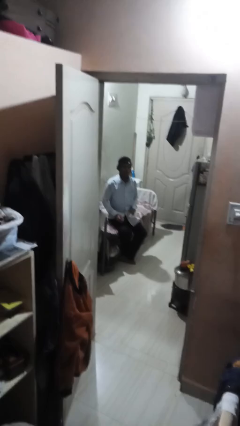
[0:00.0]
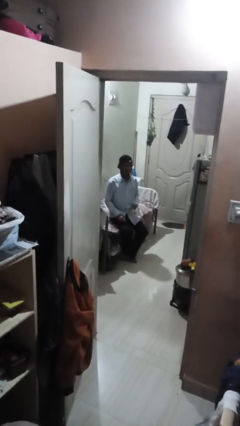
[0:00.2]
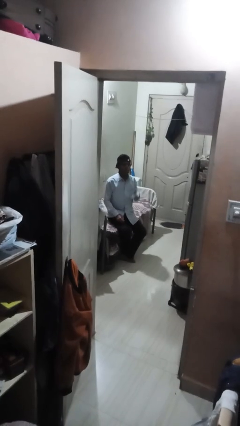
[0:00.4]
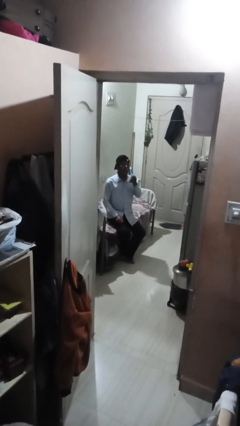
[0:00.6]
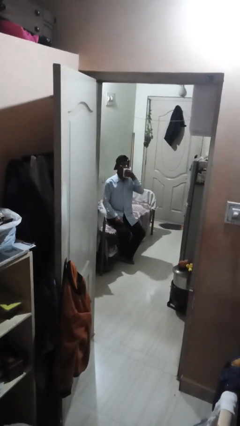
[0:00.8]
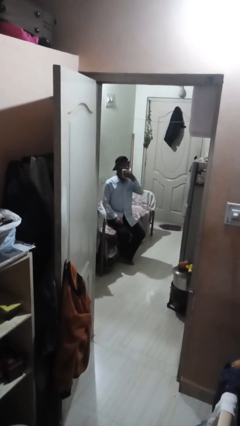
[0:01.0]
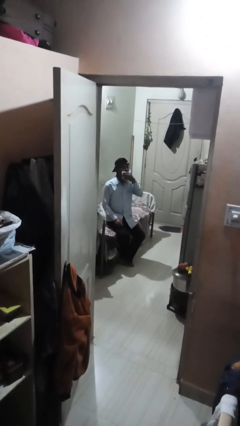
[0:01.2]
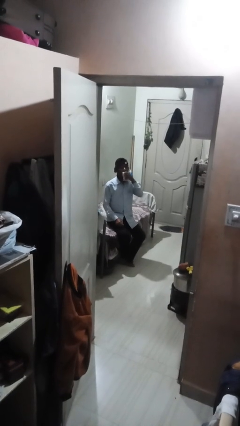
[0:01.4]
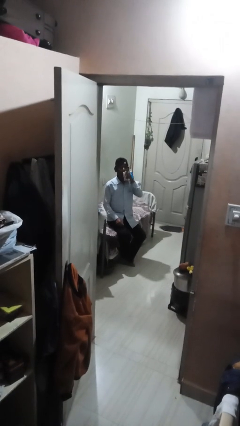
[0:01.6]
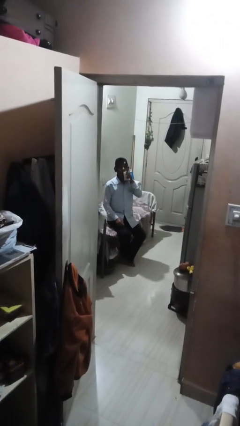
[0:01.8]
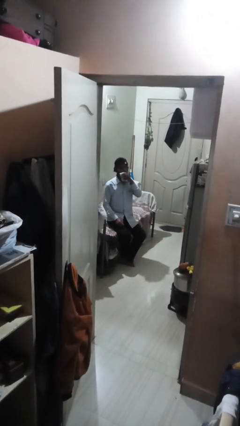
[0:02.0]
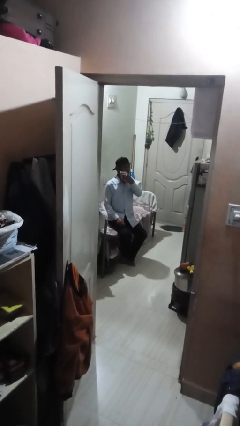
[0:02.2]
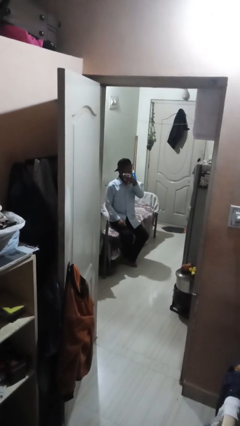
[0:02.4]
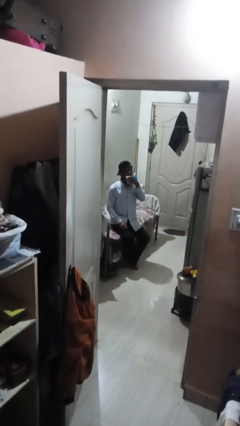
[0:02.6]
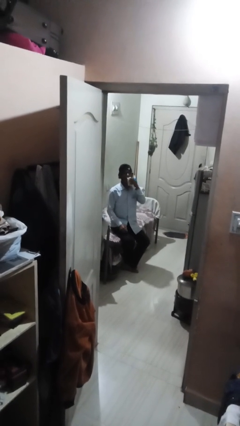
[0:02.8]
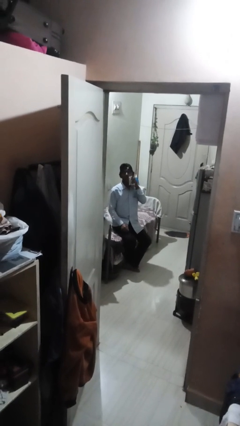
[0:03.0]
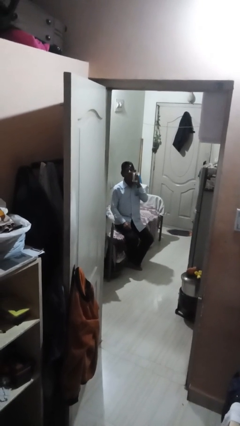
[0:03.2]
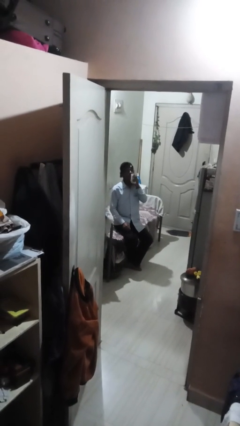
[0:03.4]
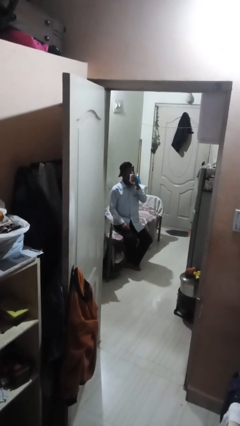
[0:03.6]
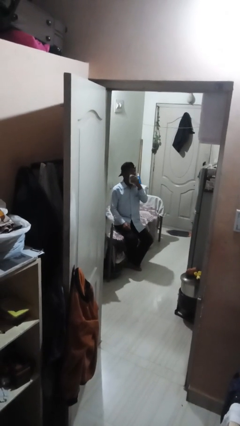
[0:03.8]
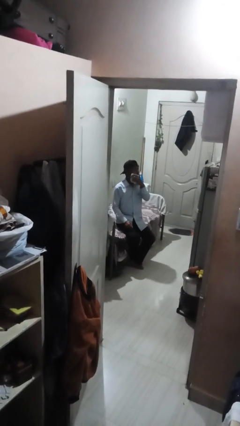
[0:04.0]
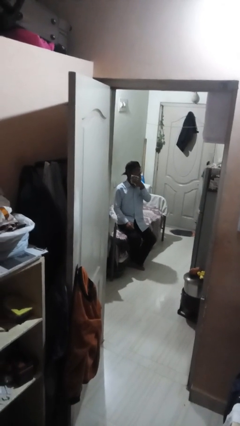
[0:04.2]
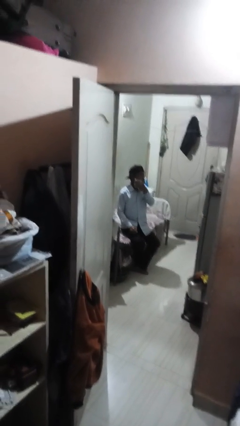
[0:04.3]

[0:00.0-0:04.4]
person wipes mouth with napkin

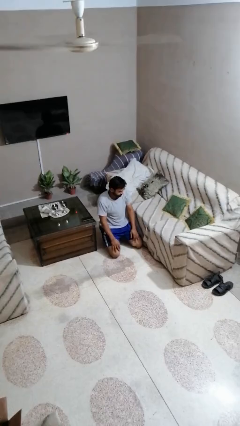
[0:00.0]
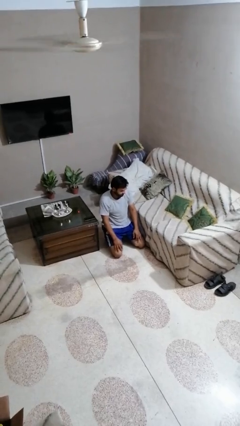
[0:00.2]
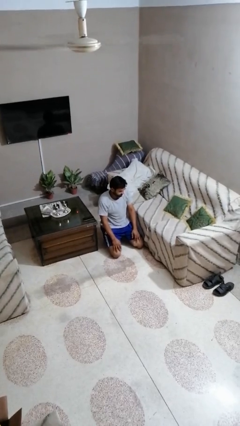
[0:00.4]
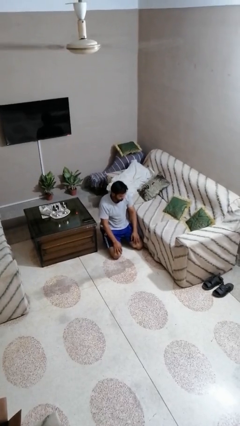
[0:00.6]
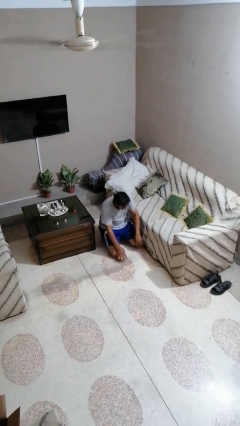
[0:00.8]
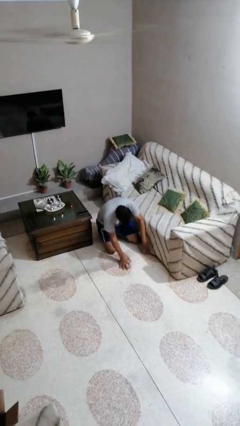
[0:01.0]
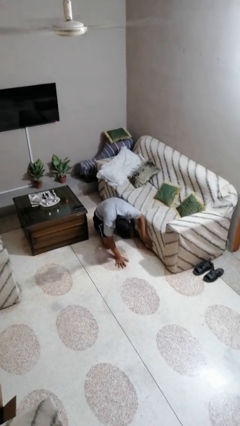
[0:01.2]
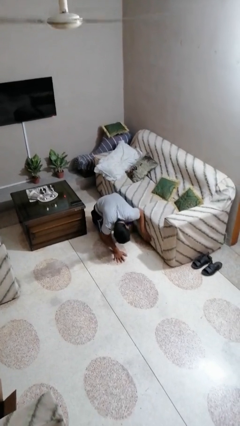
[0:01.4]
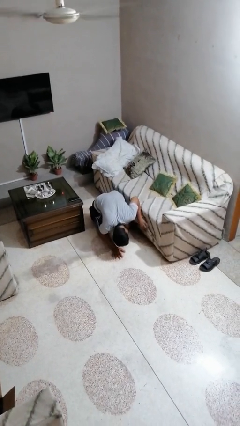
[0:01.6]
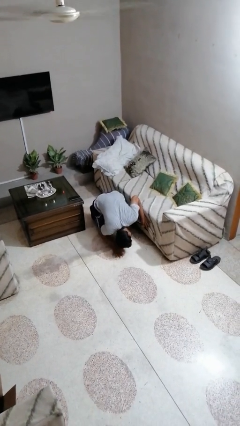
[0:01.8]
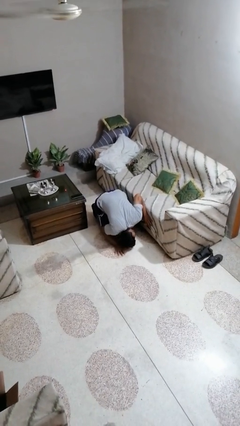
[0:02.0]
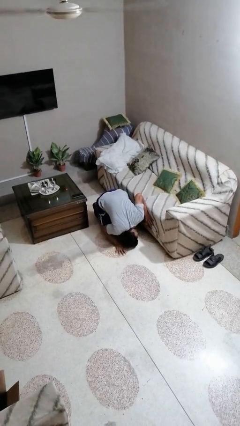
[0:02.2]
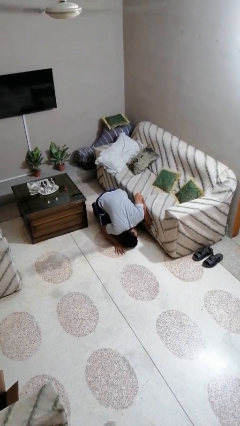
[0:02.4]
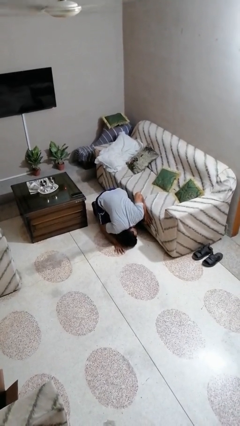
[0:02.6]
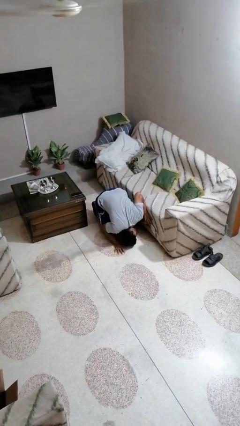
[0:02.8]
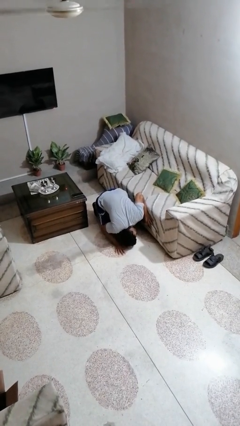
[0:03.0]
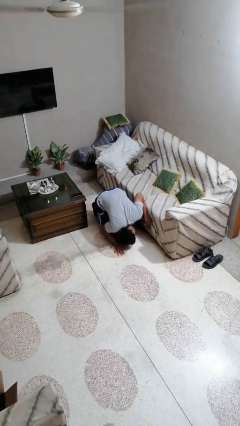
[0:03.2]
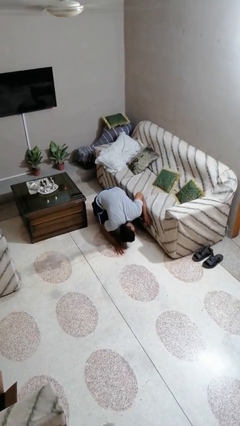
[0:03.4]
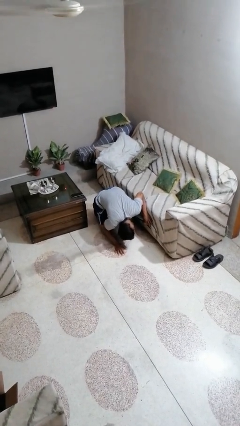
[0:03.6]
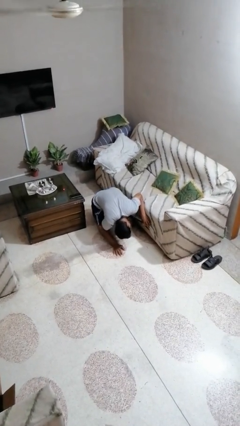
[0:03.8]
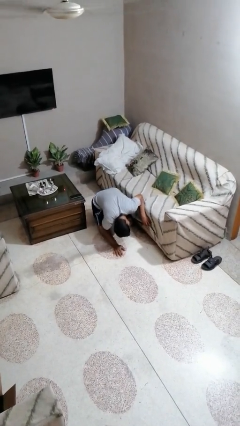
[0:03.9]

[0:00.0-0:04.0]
person searches under couch

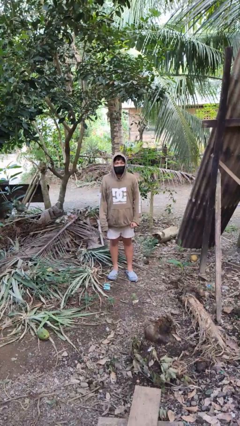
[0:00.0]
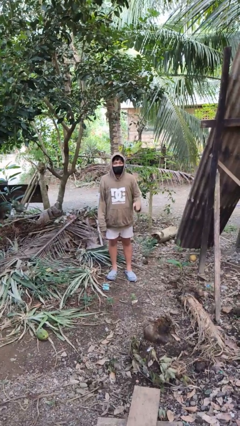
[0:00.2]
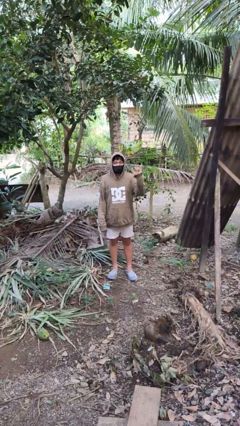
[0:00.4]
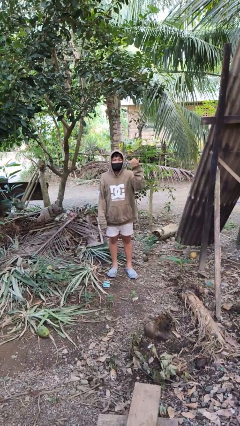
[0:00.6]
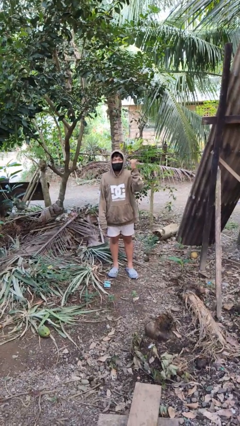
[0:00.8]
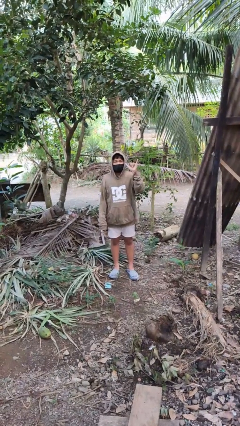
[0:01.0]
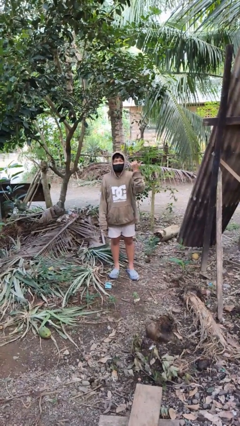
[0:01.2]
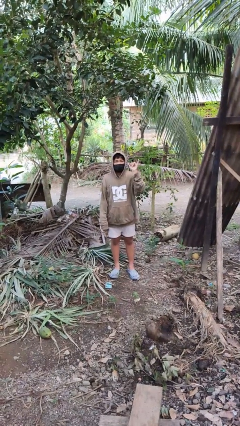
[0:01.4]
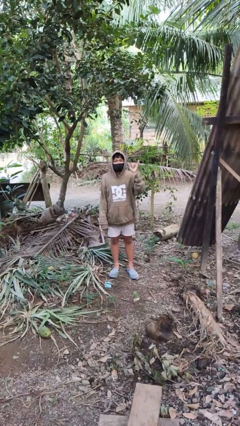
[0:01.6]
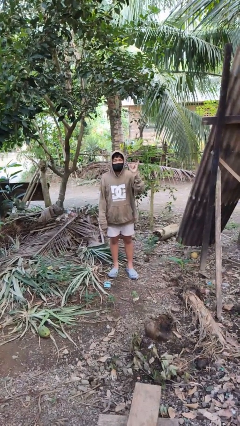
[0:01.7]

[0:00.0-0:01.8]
person gestures hang loose

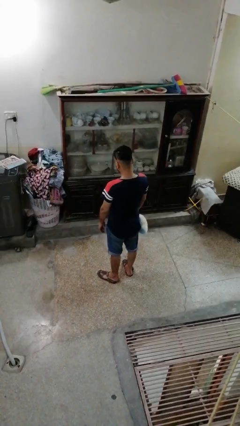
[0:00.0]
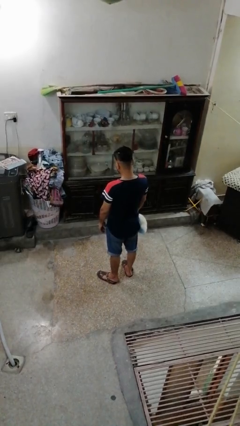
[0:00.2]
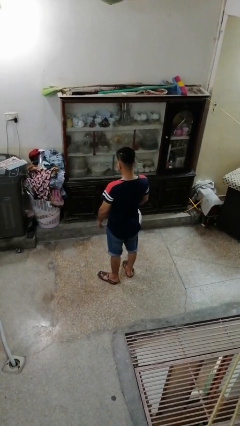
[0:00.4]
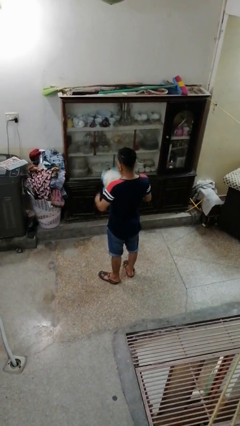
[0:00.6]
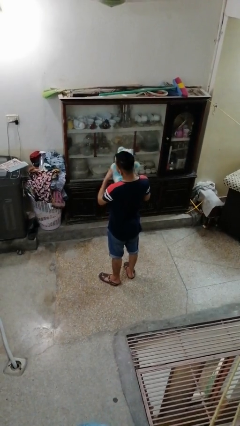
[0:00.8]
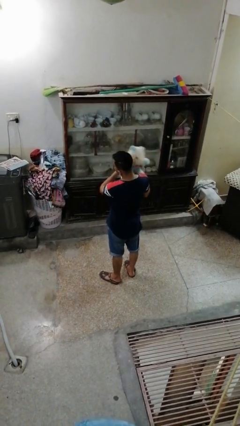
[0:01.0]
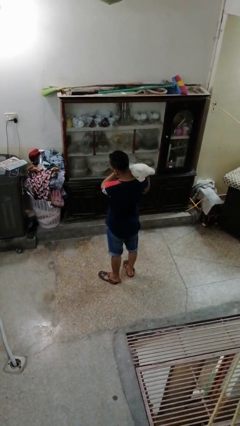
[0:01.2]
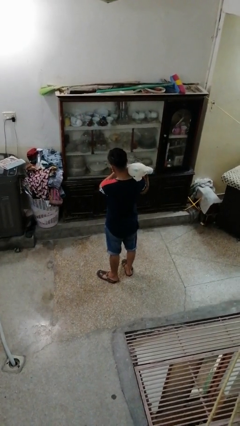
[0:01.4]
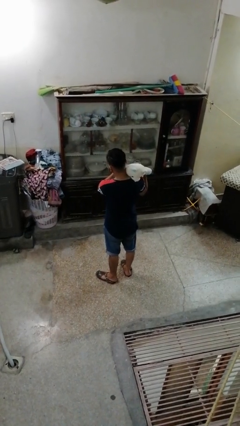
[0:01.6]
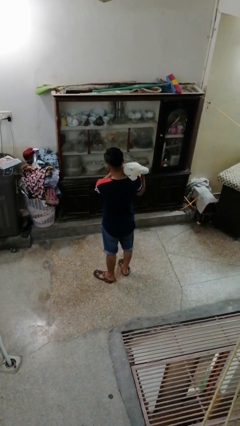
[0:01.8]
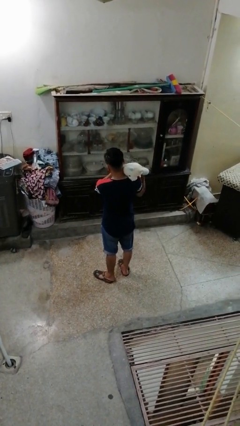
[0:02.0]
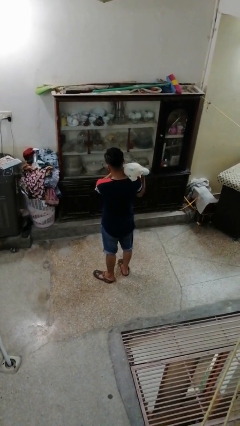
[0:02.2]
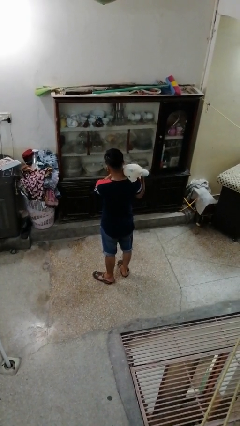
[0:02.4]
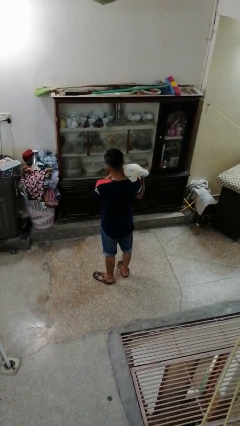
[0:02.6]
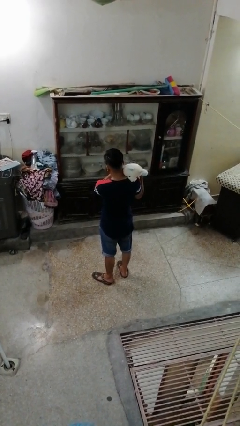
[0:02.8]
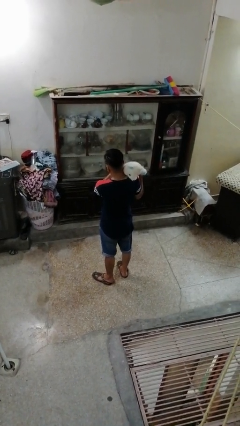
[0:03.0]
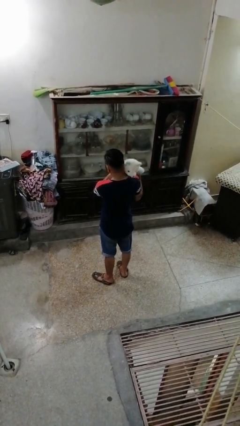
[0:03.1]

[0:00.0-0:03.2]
person hugs stuffed animal

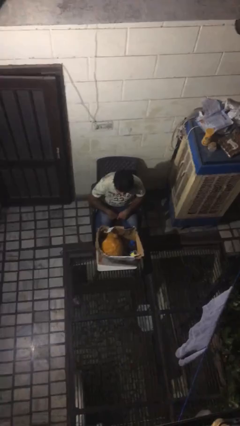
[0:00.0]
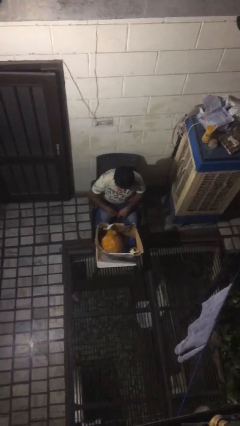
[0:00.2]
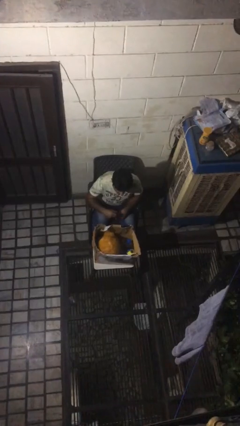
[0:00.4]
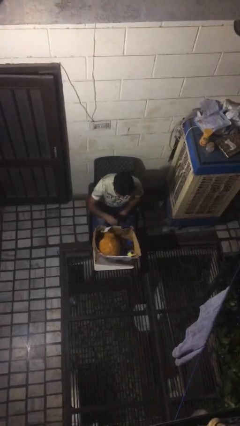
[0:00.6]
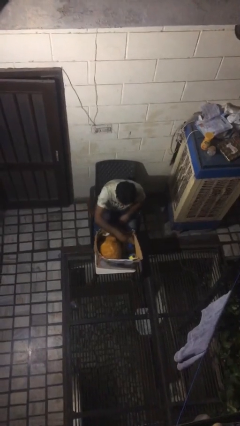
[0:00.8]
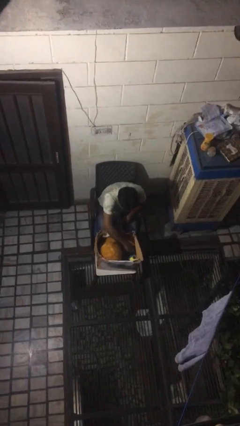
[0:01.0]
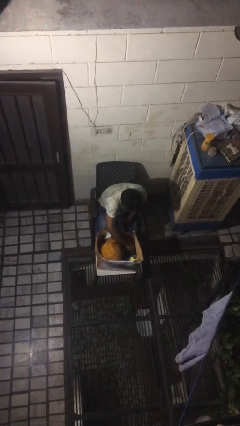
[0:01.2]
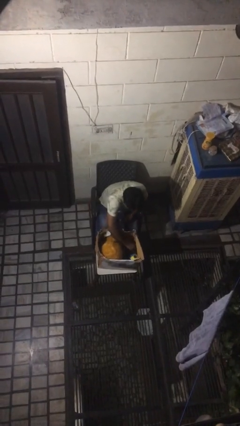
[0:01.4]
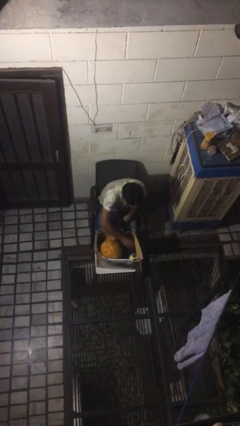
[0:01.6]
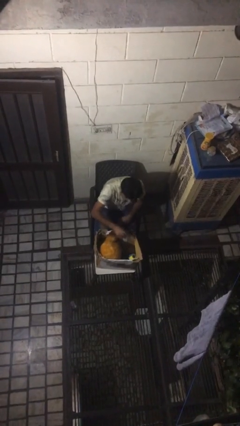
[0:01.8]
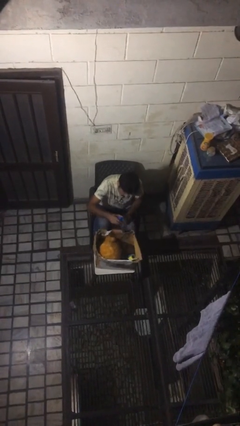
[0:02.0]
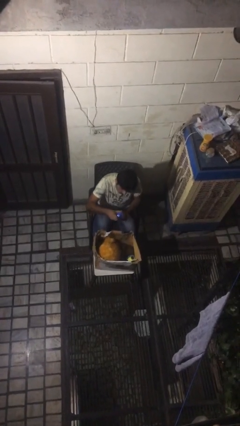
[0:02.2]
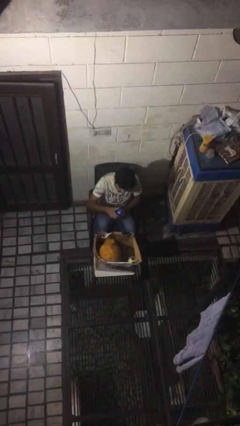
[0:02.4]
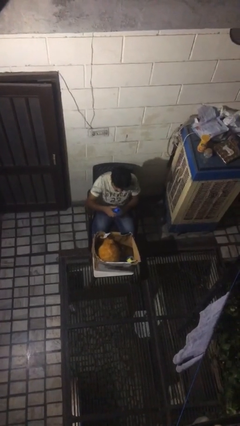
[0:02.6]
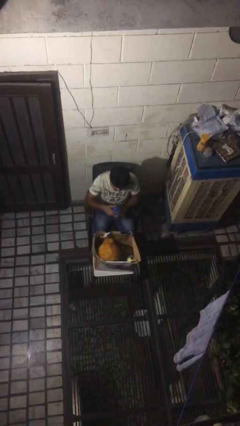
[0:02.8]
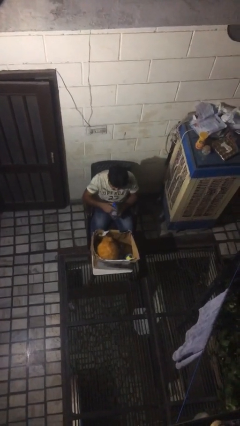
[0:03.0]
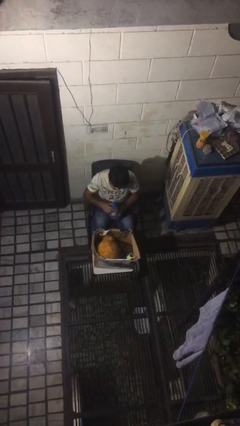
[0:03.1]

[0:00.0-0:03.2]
person takes object from box

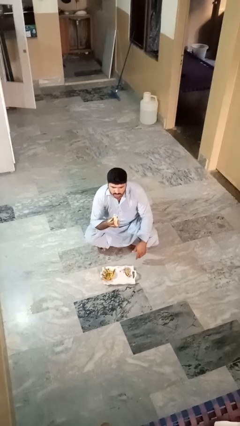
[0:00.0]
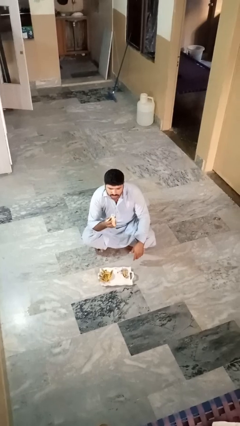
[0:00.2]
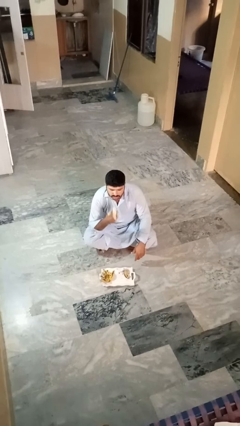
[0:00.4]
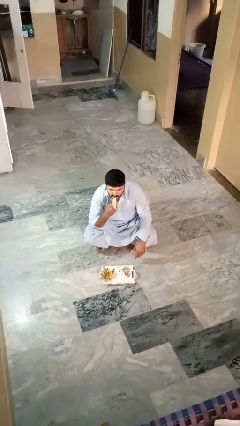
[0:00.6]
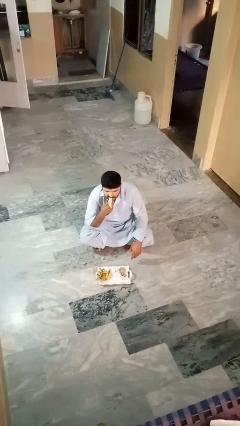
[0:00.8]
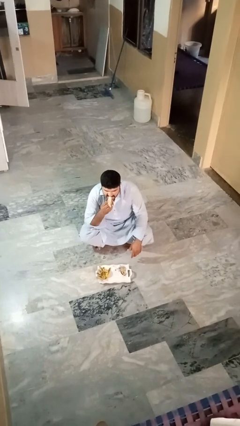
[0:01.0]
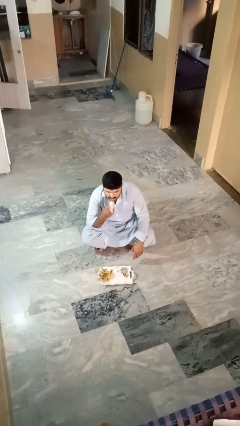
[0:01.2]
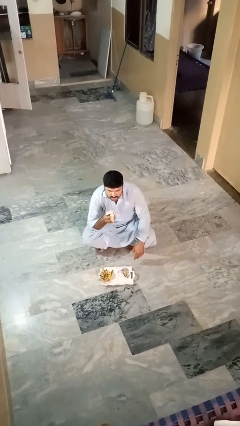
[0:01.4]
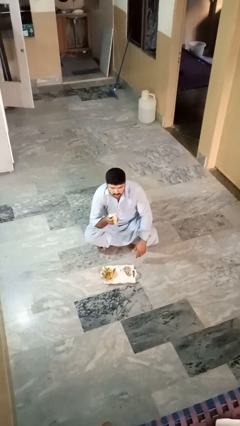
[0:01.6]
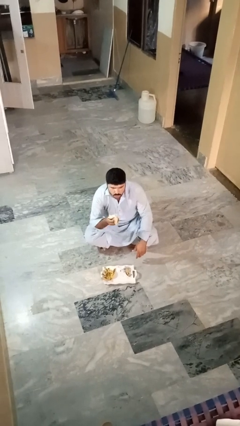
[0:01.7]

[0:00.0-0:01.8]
person eats banana
